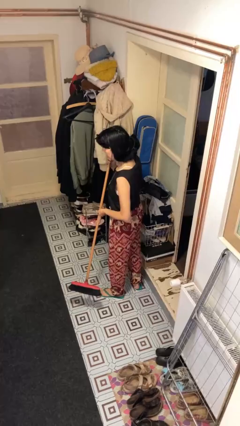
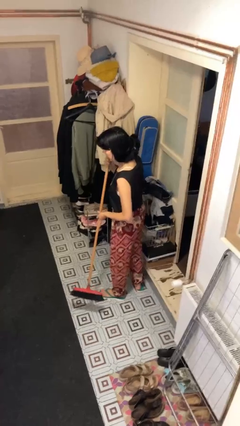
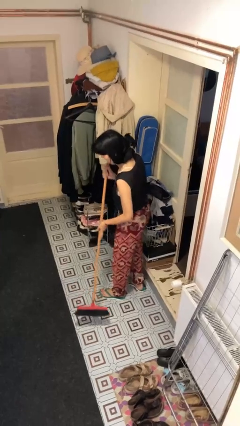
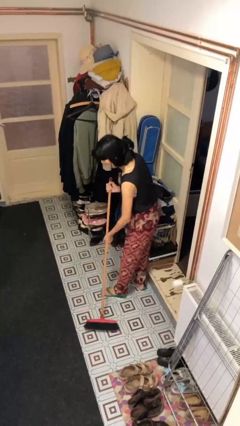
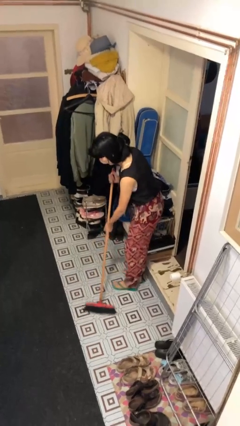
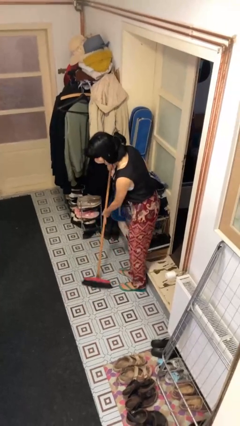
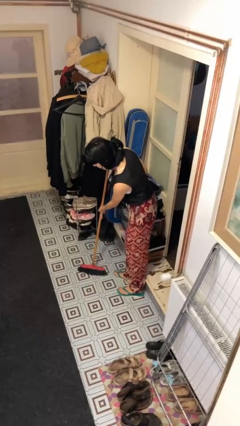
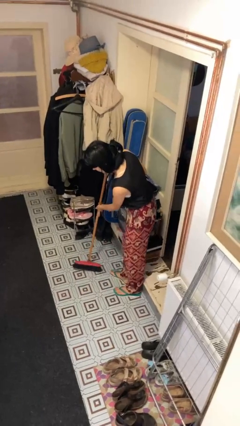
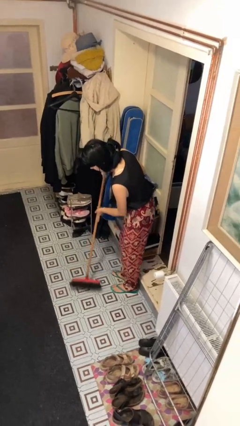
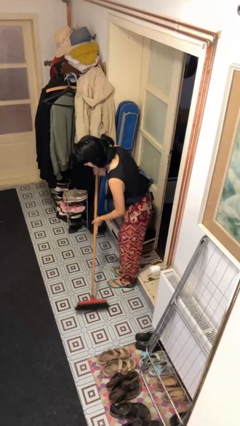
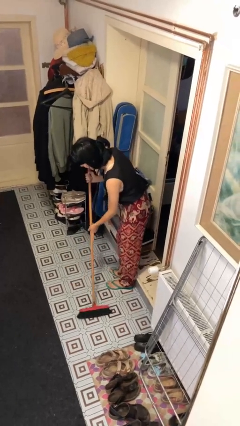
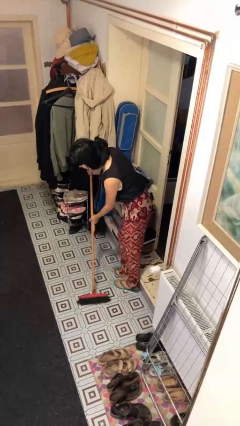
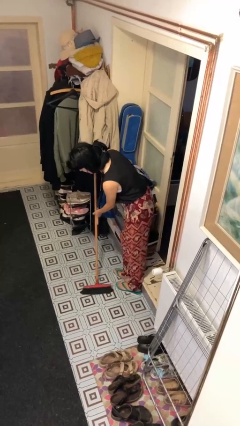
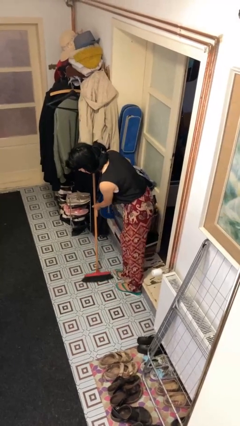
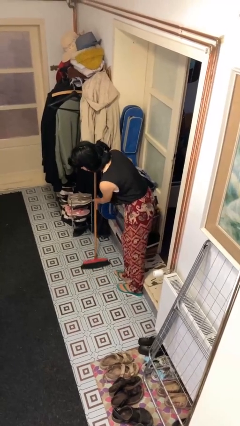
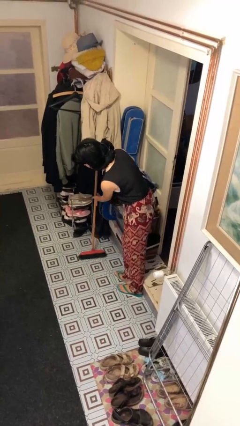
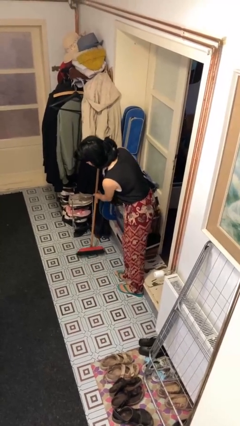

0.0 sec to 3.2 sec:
person sweeps floor

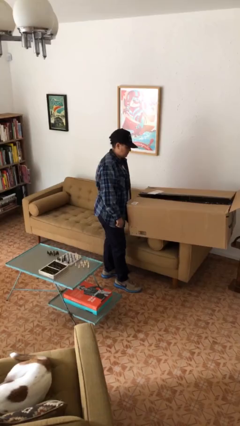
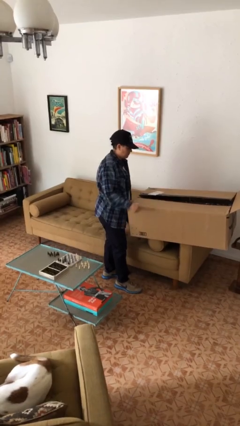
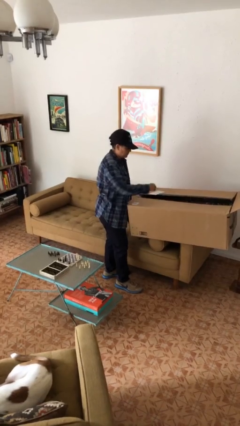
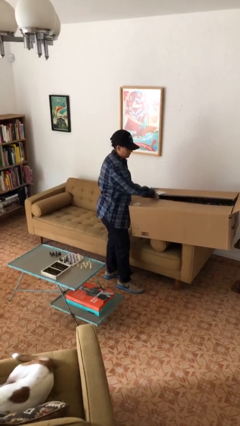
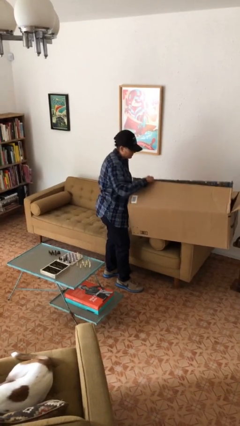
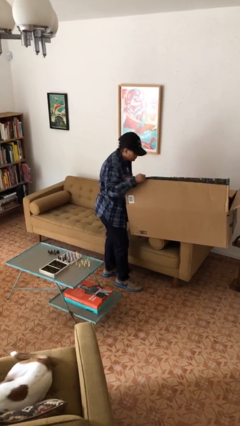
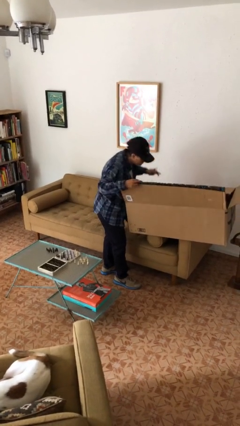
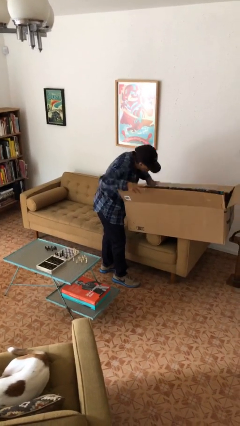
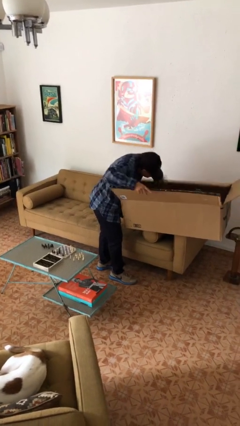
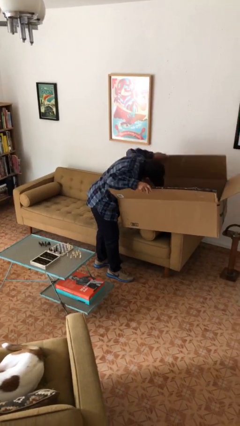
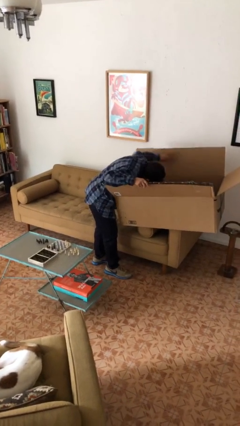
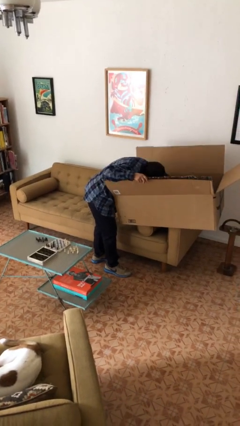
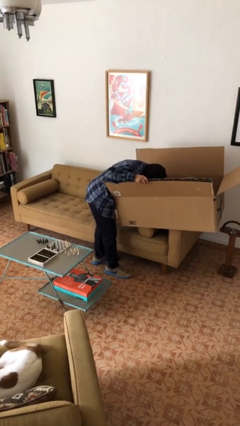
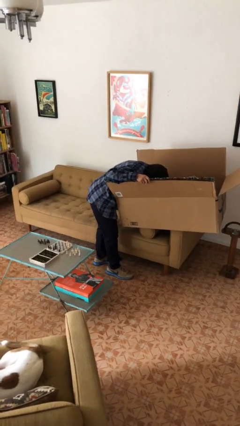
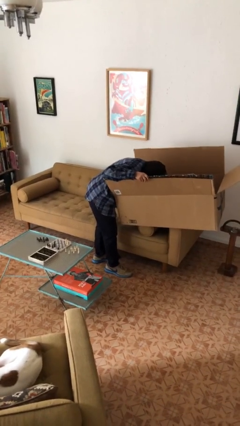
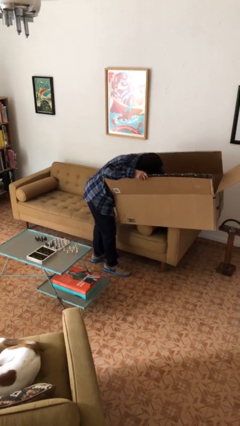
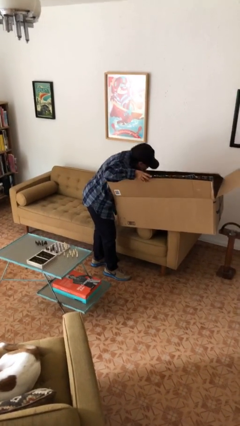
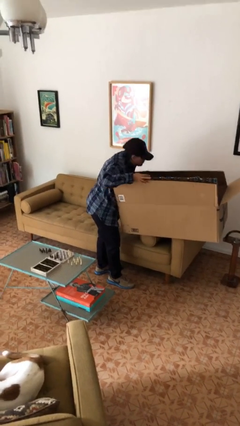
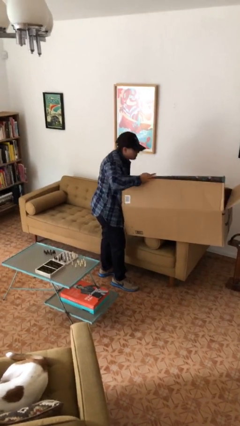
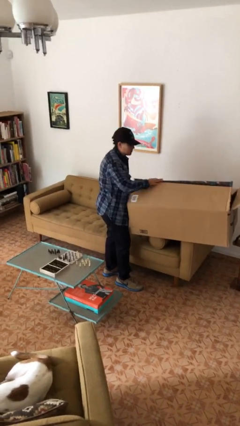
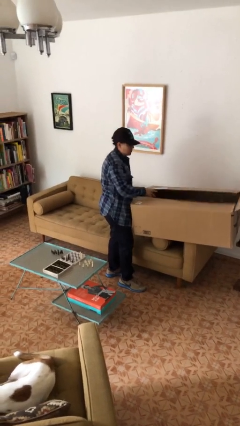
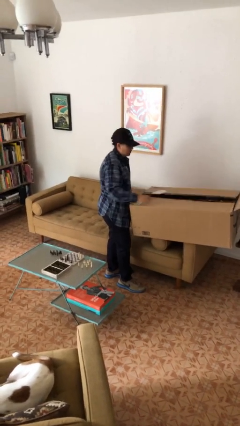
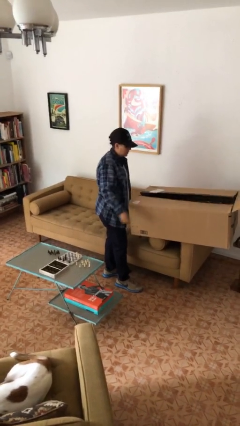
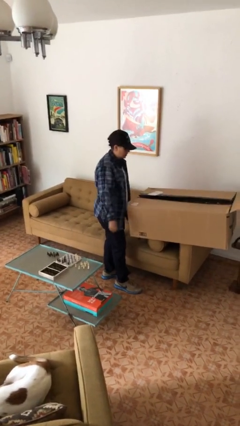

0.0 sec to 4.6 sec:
person searches in box

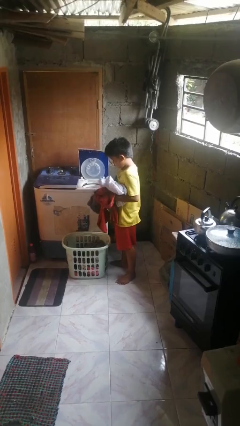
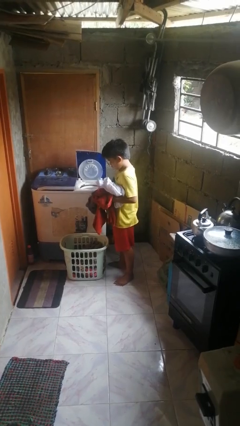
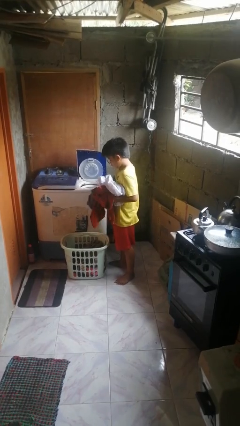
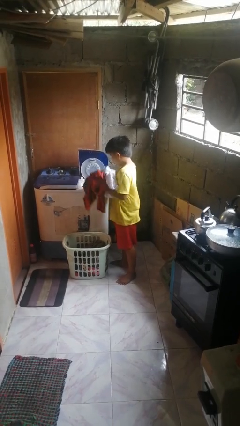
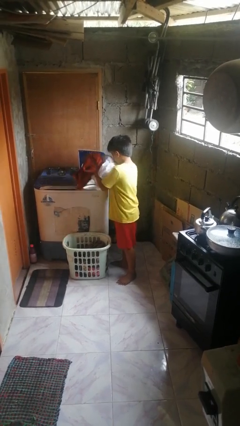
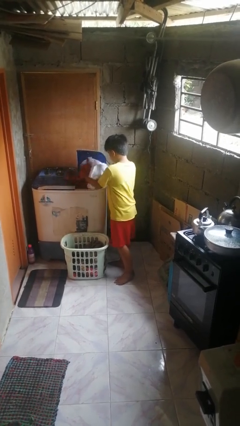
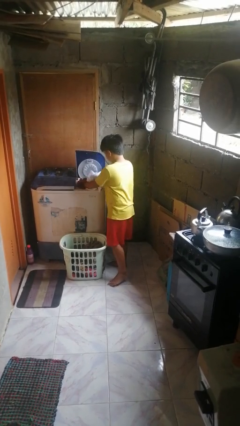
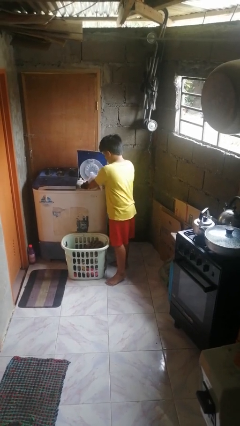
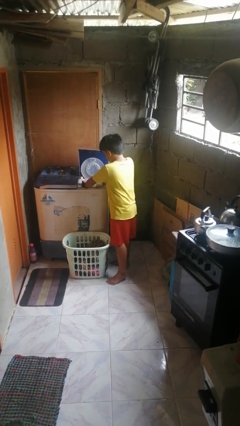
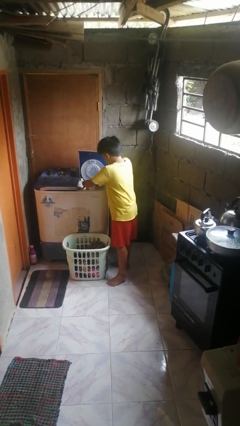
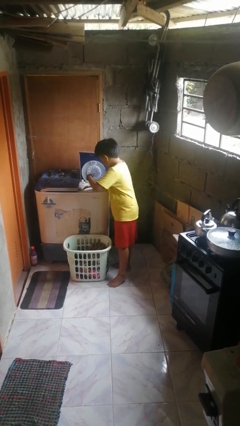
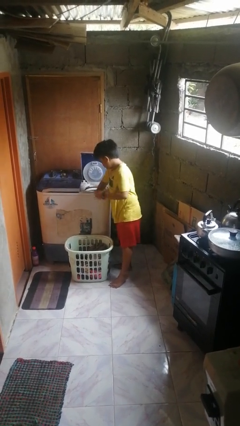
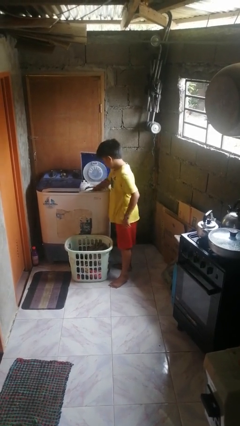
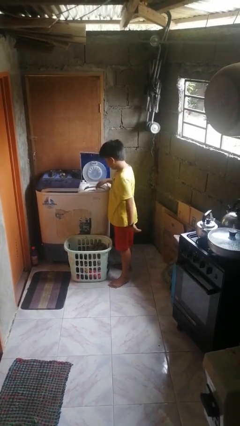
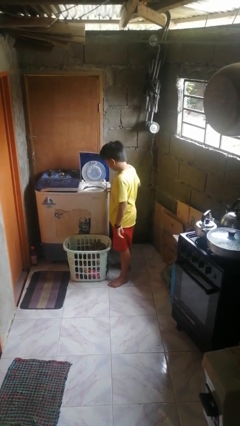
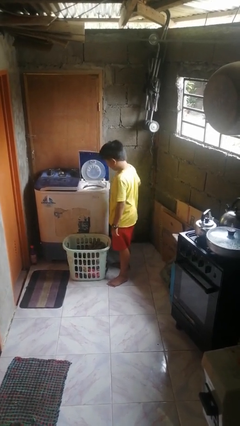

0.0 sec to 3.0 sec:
person loads dryer

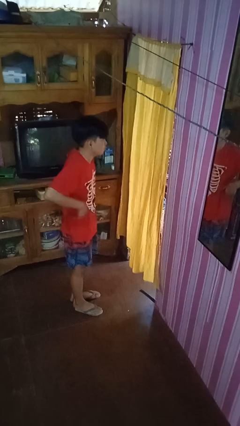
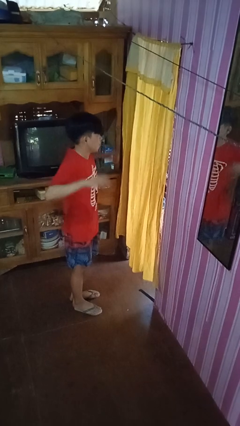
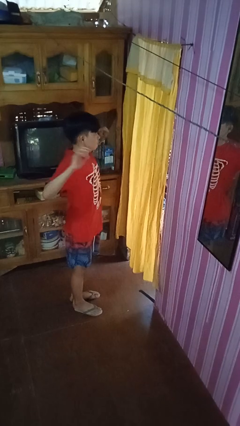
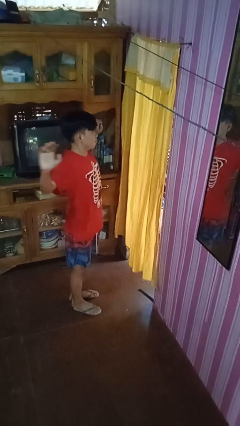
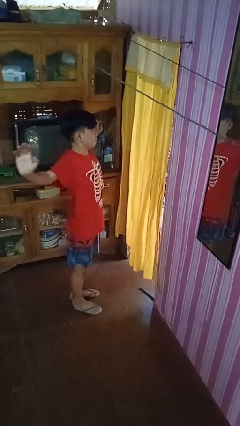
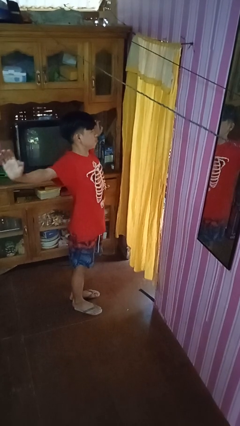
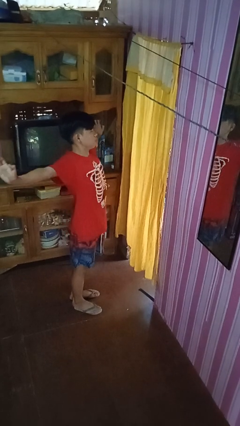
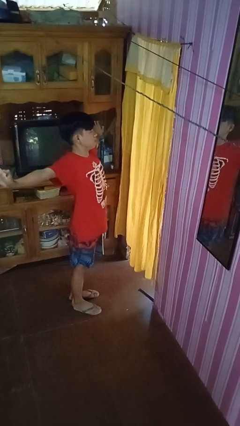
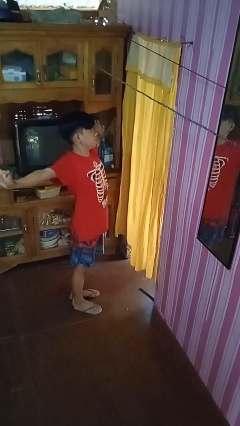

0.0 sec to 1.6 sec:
person stretches arms to side

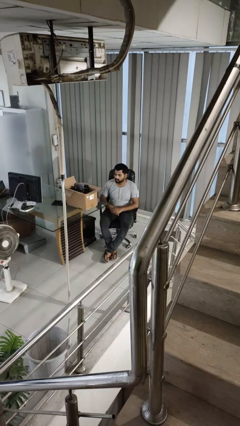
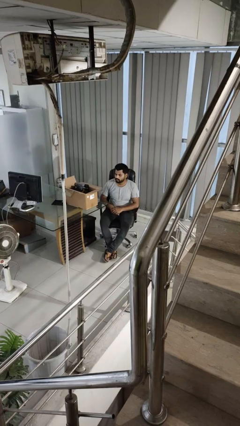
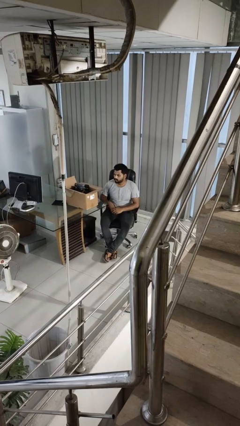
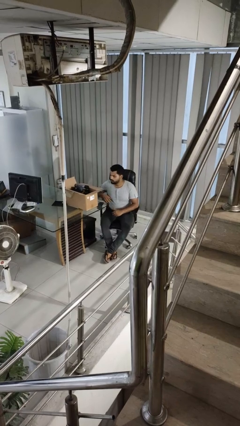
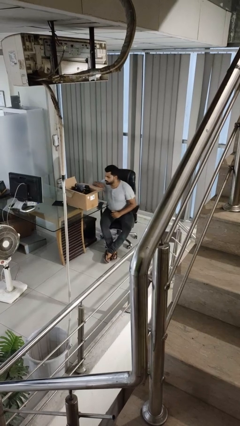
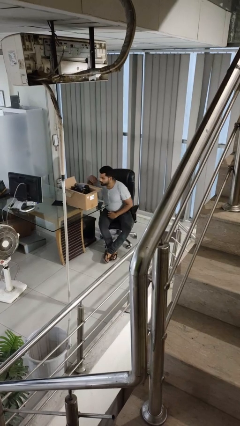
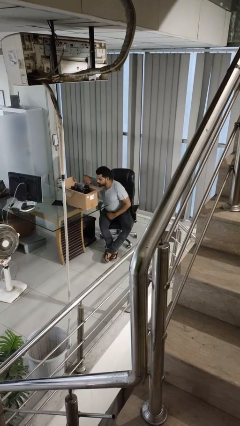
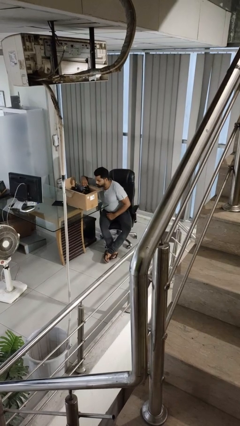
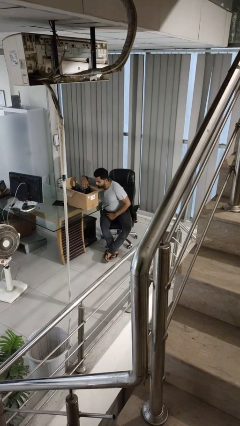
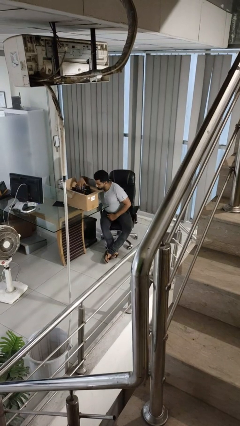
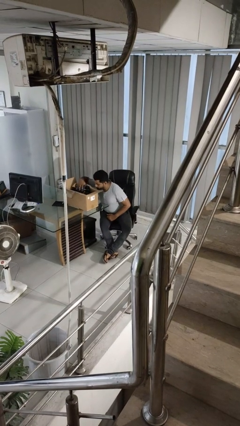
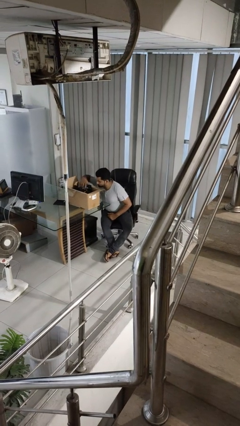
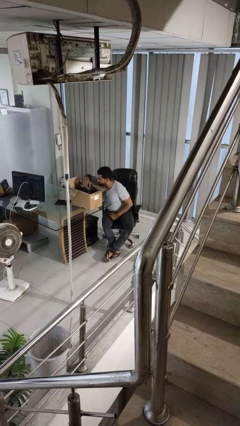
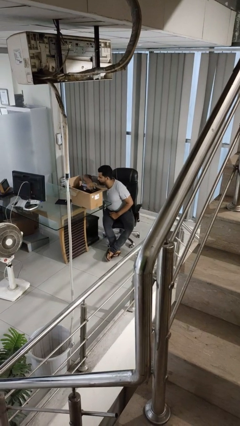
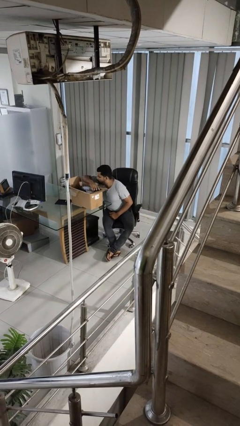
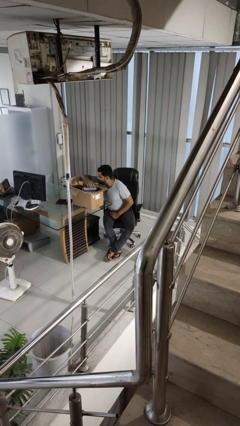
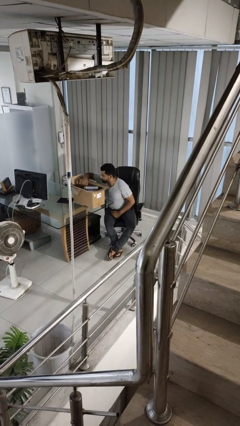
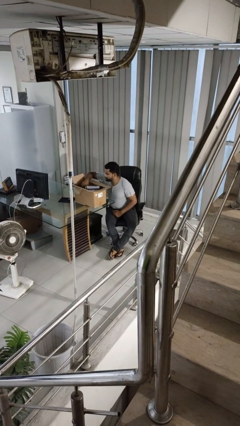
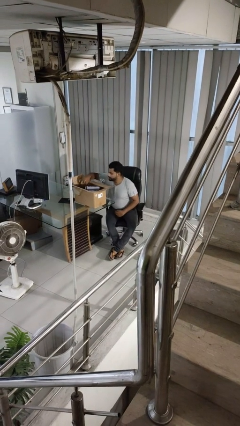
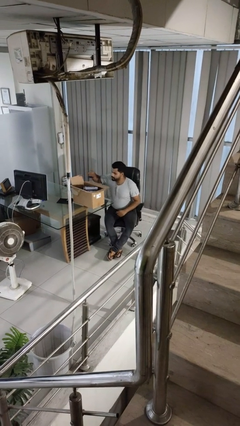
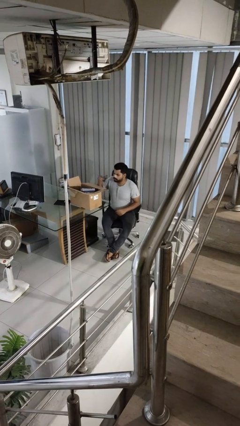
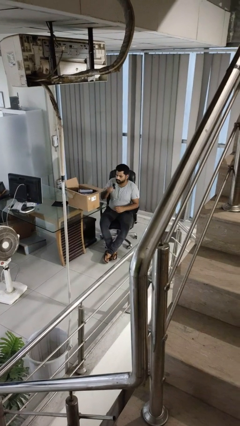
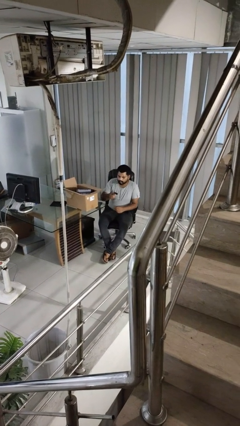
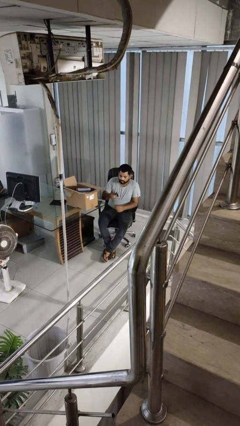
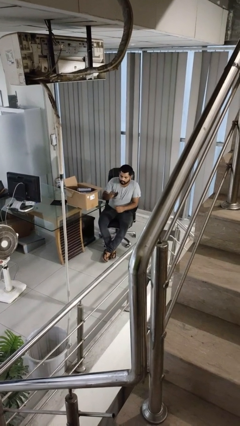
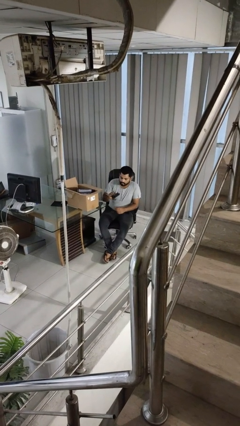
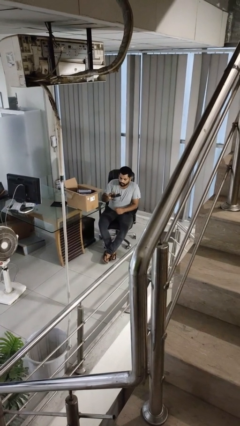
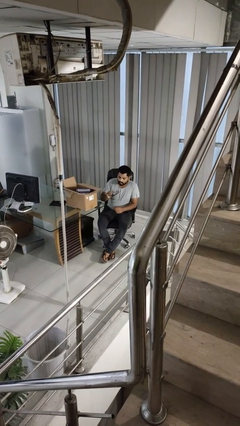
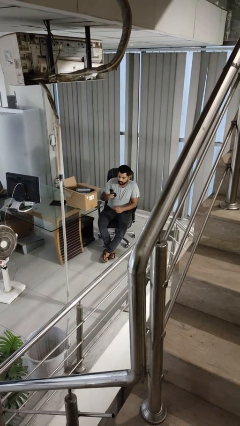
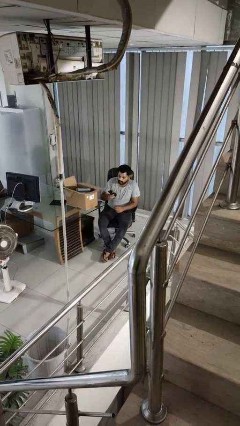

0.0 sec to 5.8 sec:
person takes object from box
